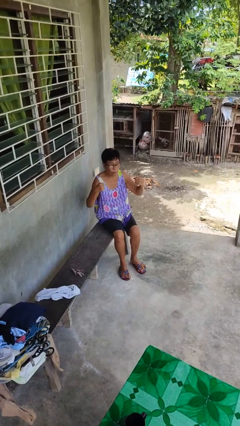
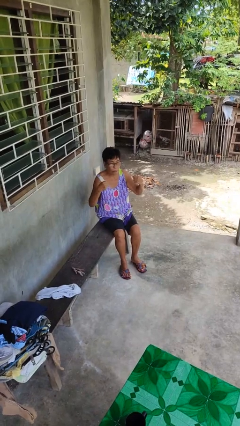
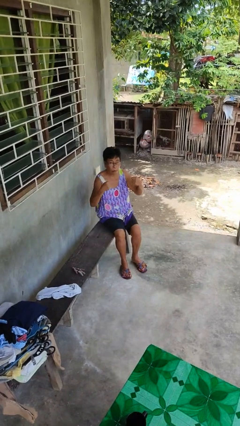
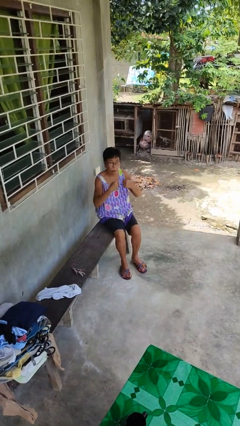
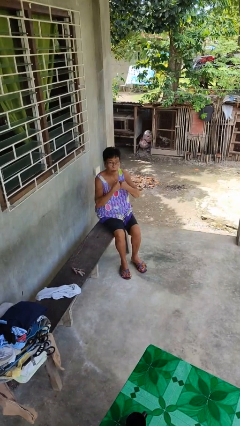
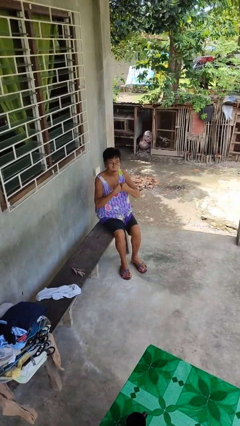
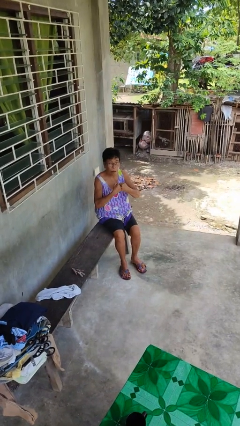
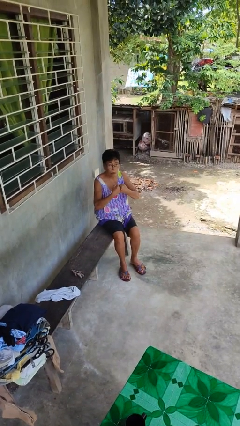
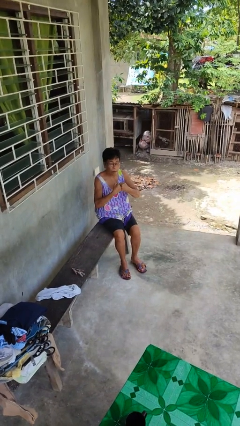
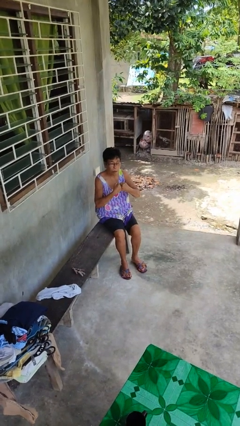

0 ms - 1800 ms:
person gestures zoom out

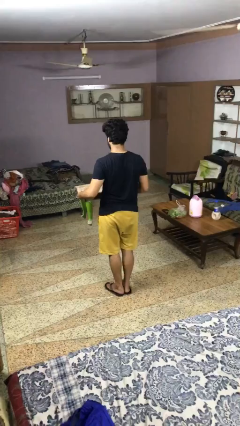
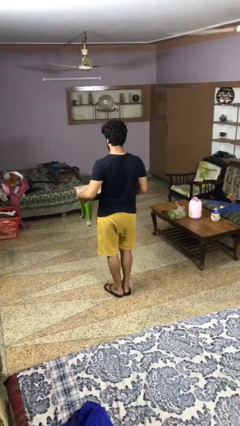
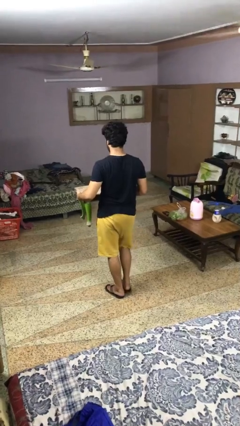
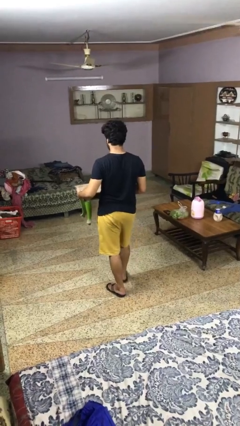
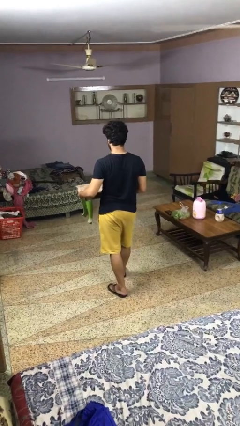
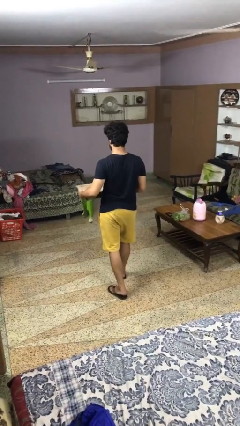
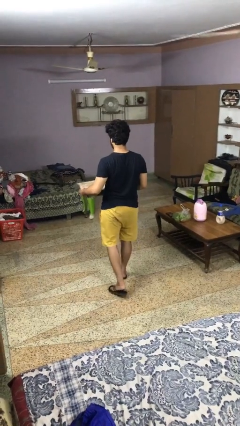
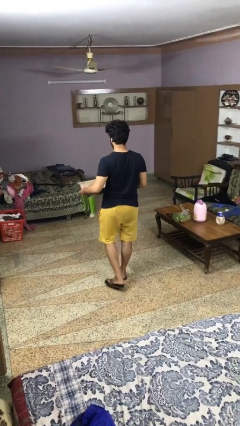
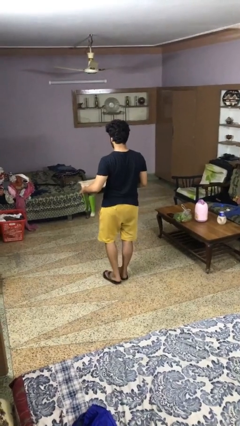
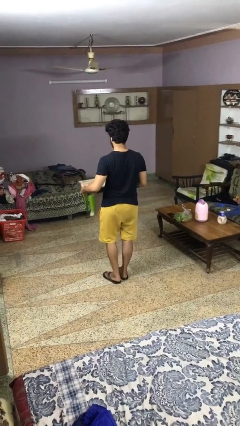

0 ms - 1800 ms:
person carries furniture

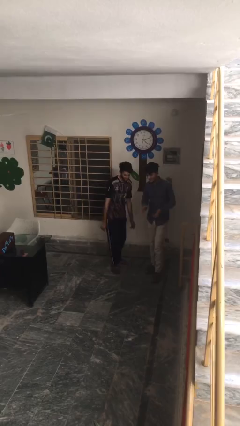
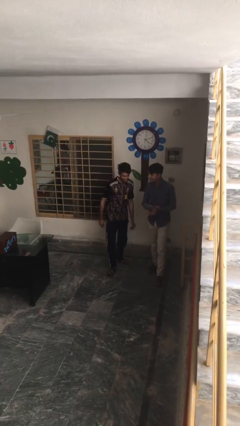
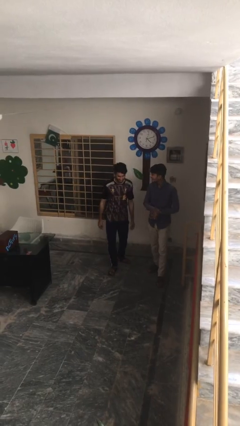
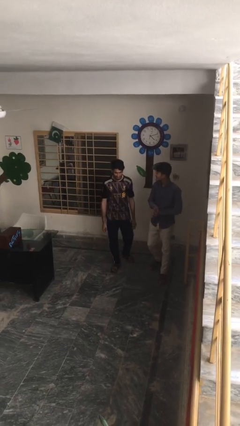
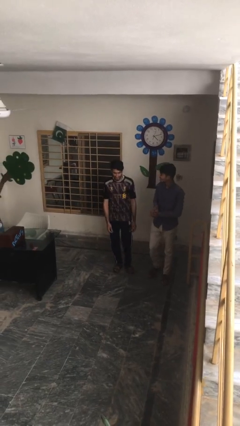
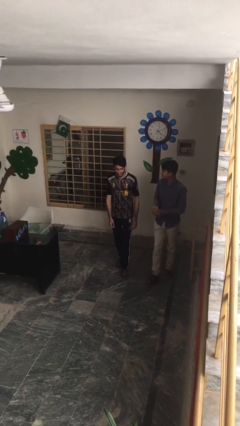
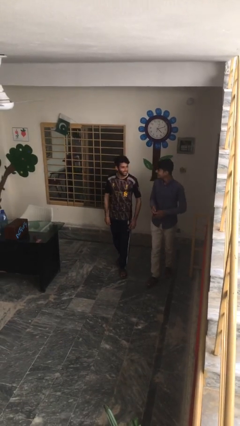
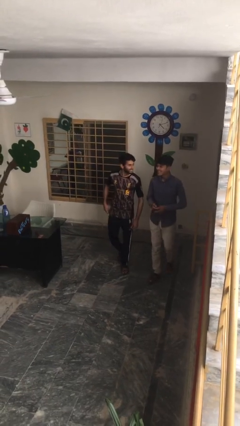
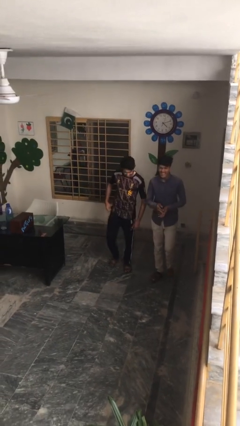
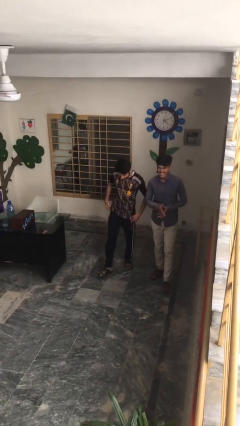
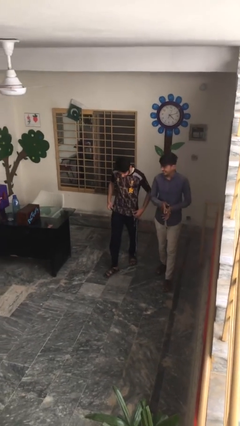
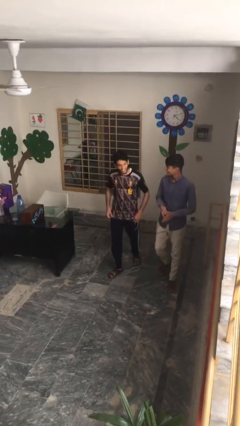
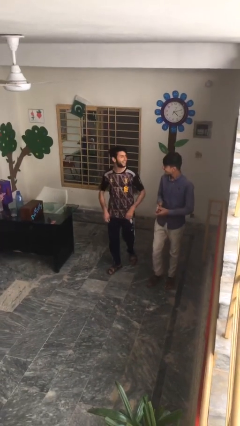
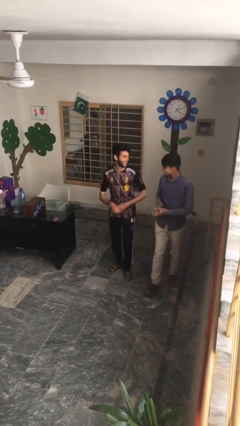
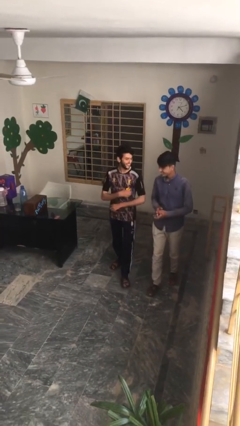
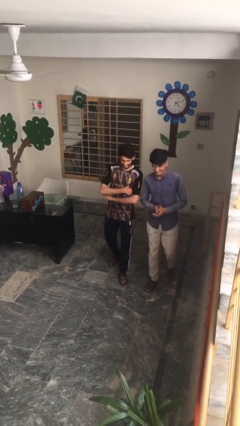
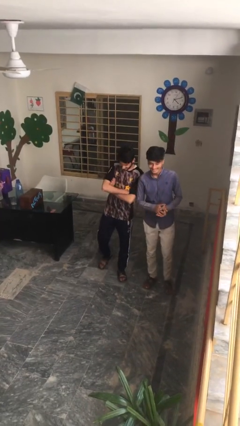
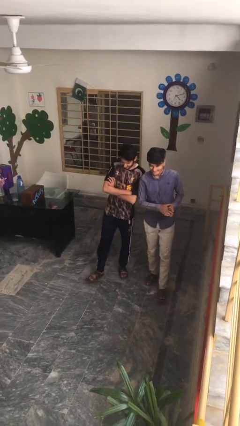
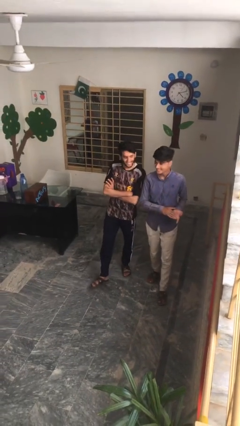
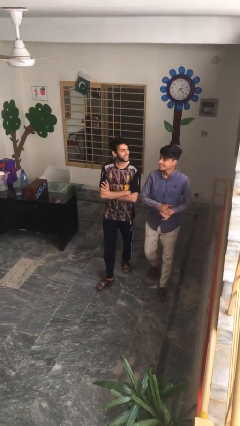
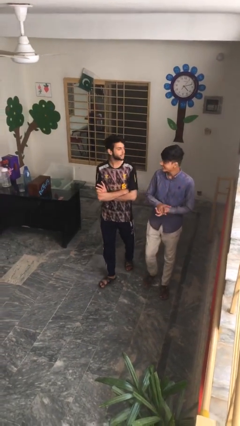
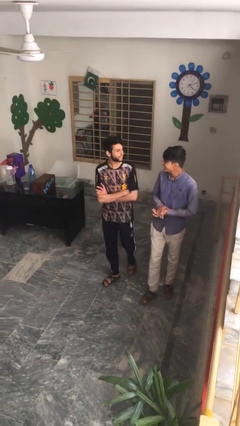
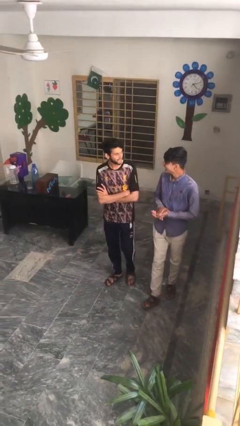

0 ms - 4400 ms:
person talks to person

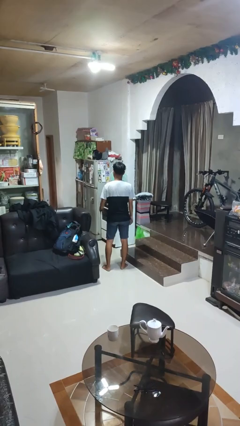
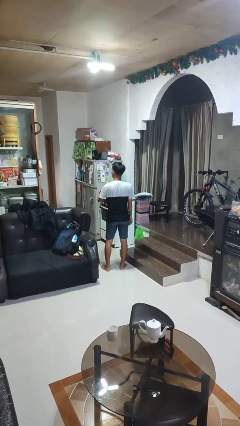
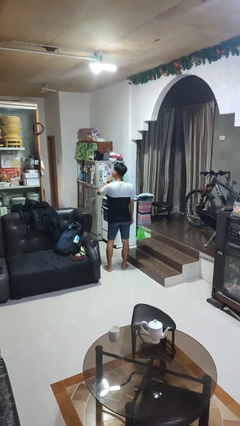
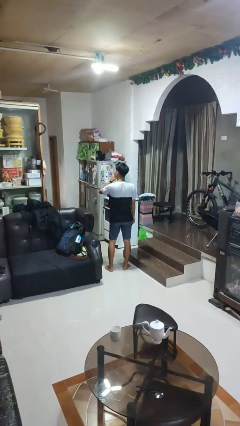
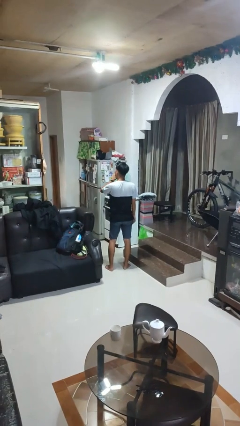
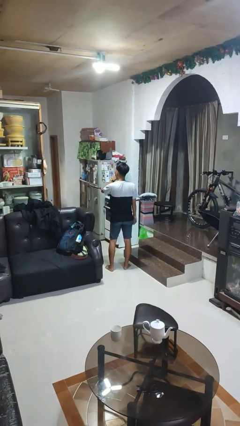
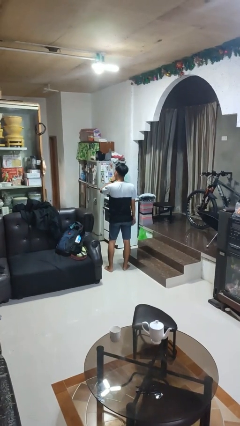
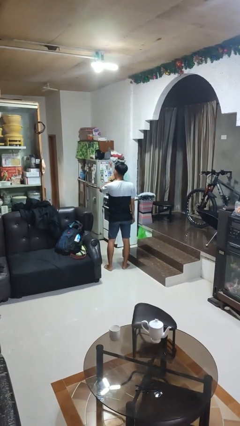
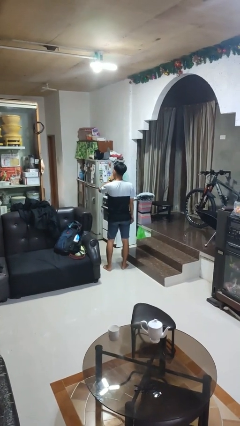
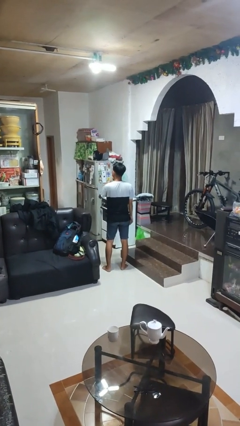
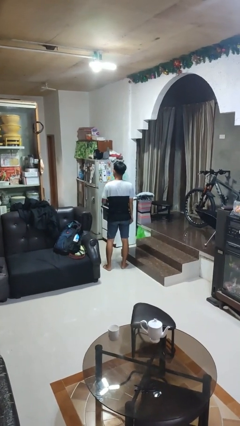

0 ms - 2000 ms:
person gestures be quiet

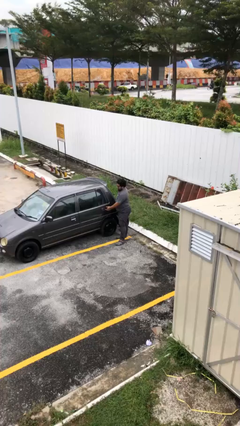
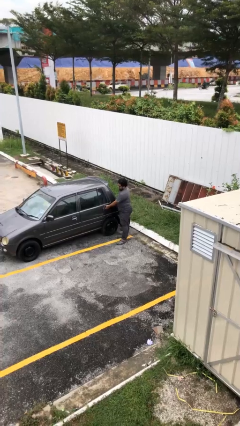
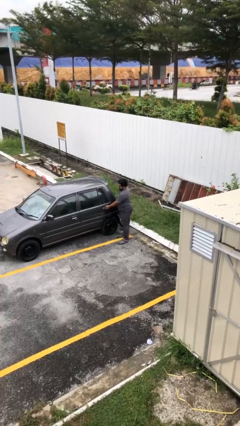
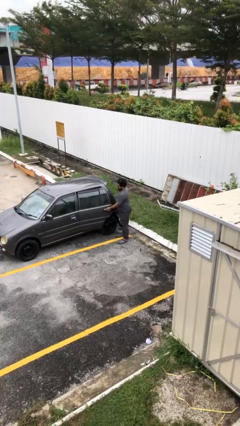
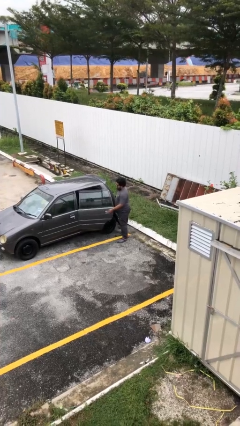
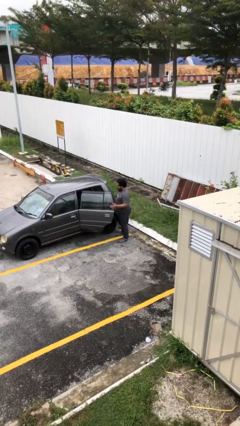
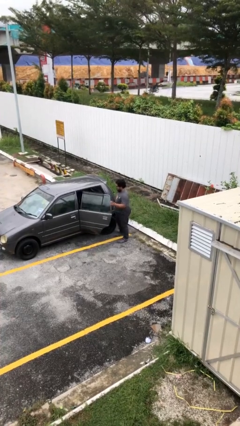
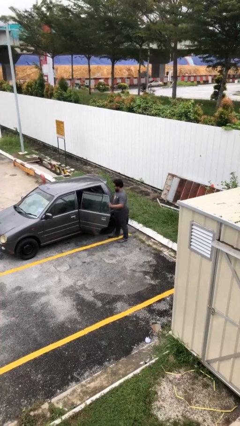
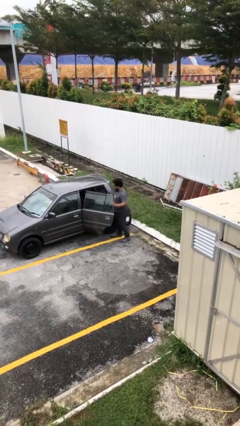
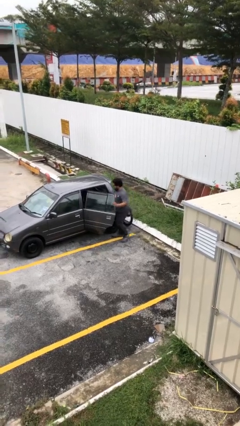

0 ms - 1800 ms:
person opens car door

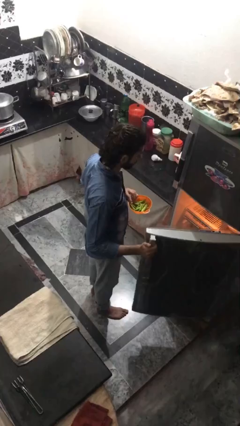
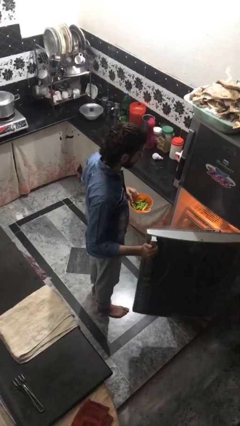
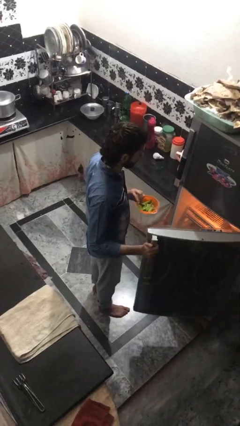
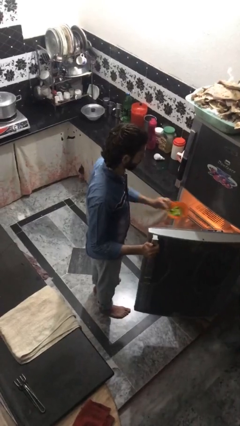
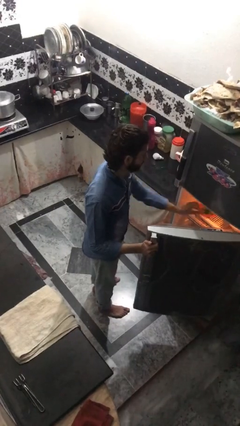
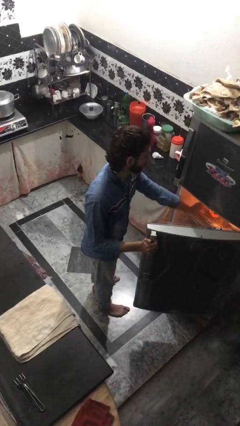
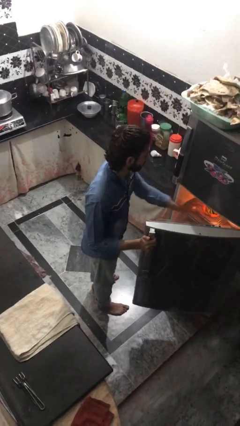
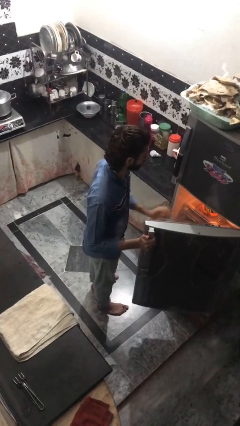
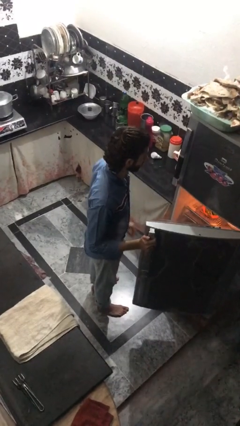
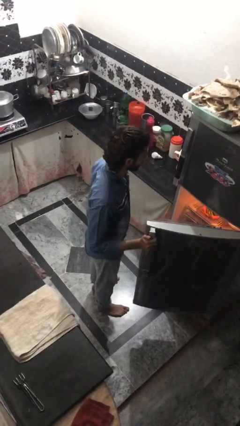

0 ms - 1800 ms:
person puts object into refrigerator

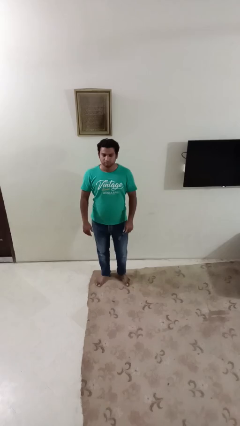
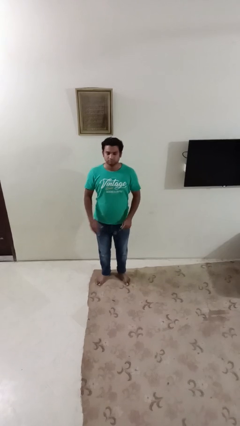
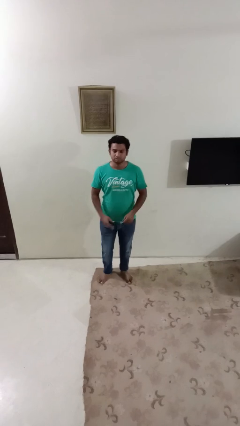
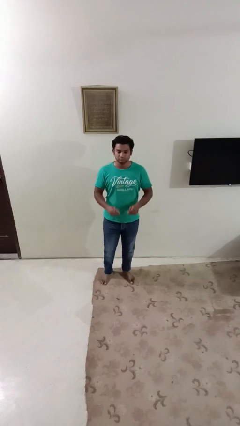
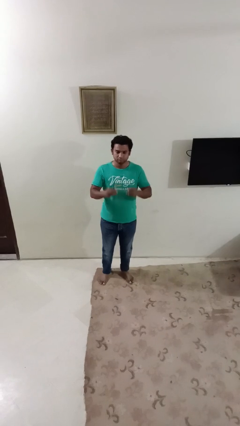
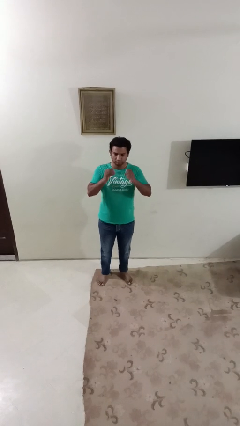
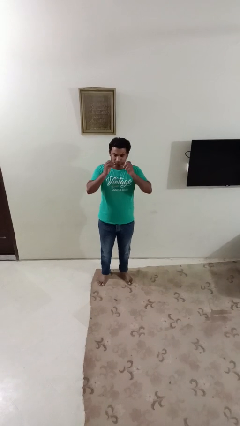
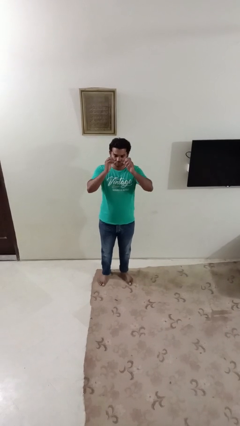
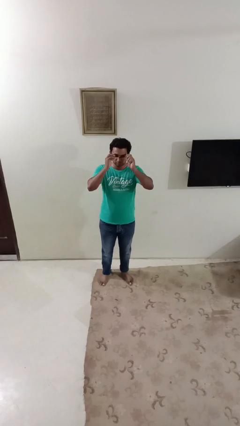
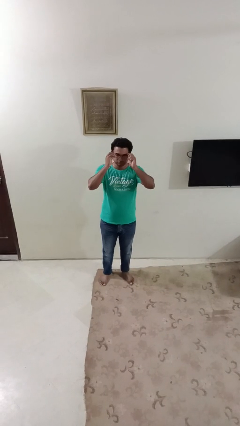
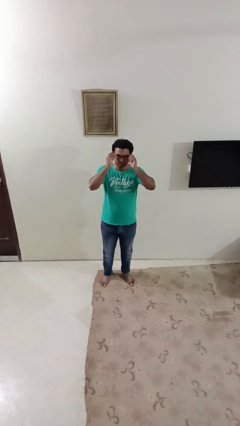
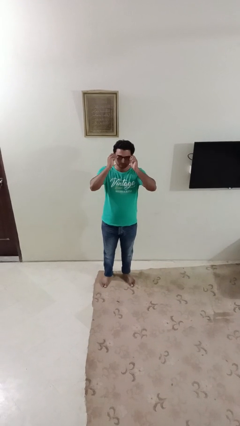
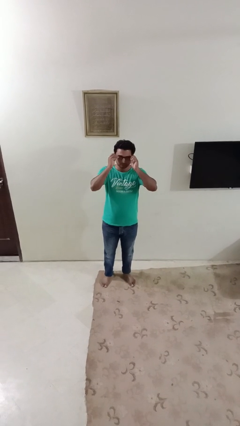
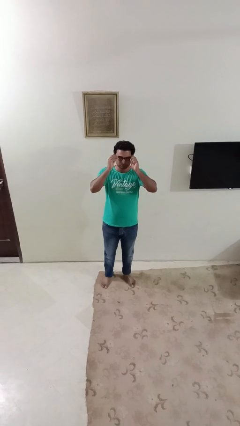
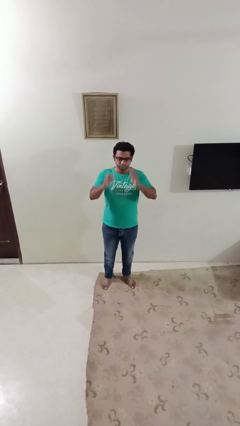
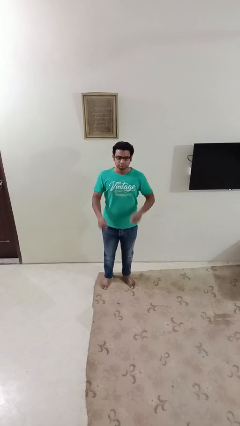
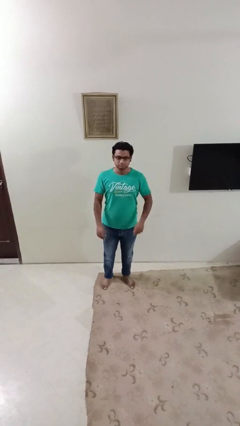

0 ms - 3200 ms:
person puts on glasses
